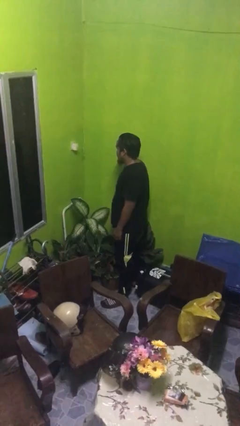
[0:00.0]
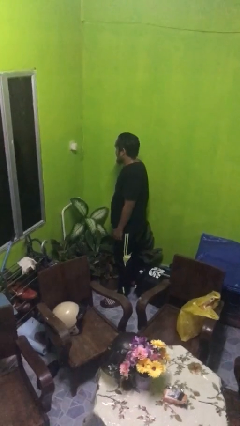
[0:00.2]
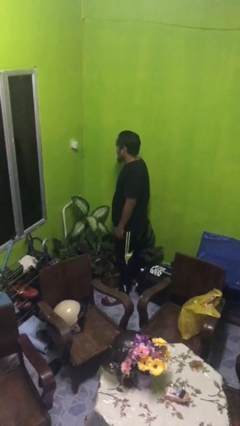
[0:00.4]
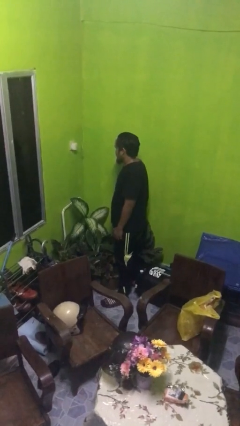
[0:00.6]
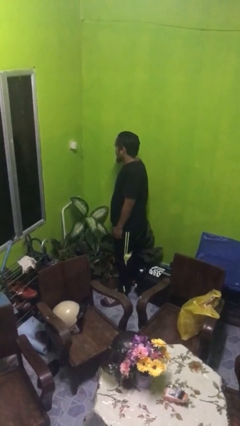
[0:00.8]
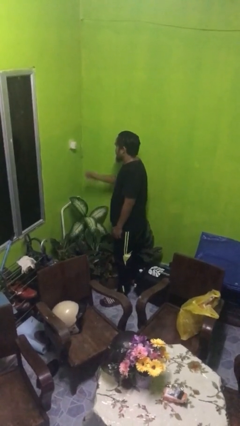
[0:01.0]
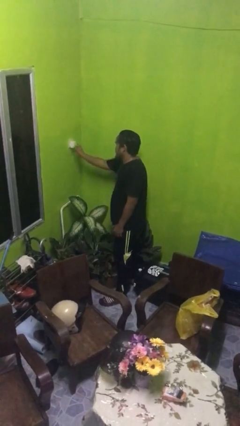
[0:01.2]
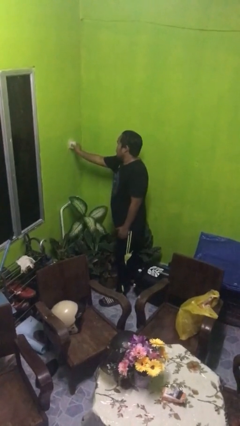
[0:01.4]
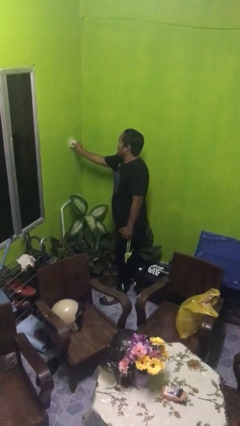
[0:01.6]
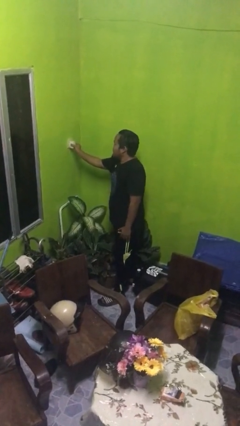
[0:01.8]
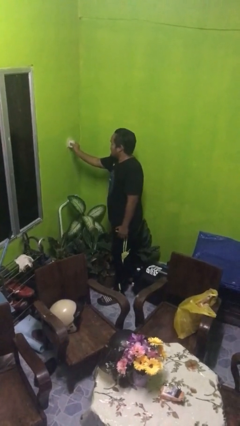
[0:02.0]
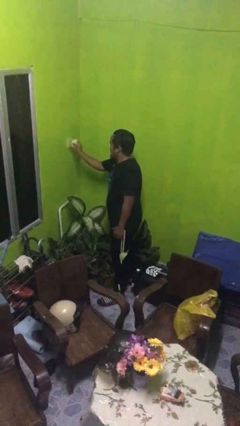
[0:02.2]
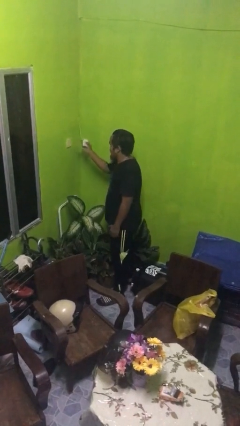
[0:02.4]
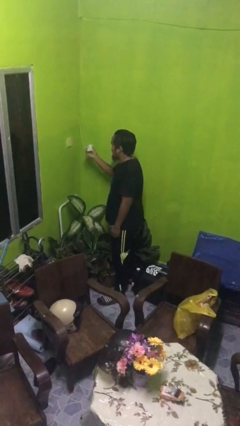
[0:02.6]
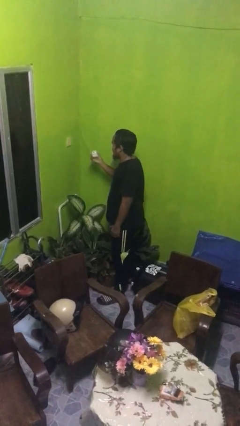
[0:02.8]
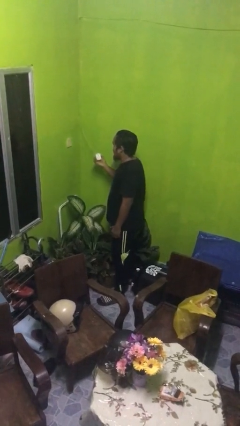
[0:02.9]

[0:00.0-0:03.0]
person unplugs from electrical socket

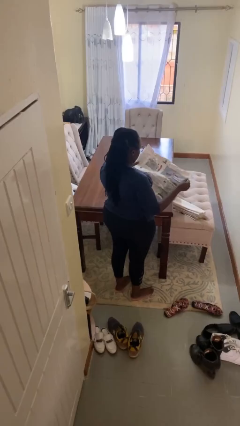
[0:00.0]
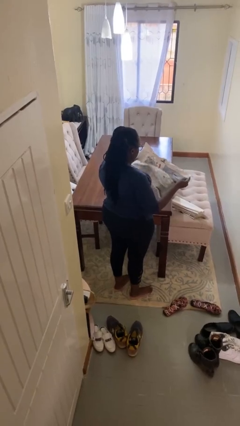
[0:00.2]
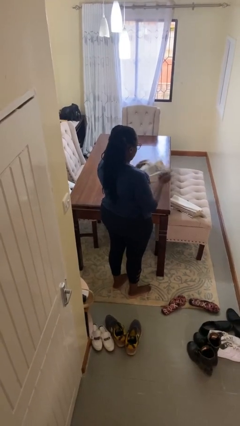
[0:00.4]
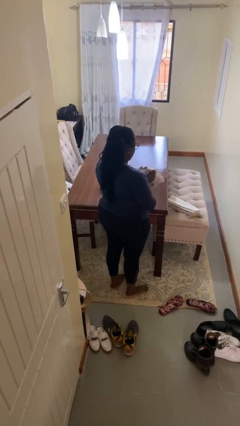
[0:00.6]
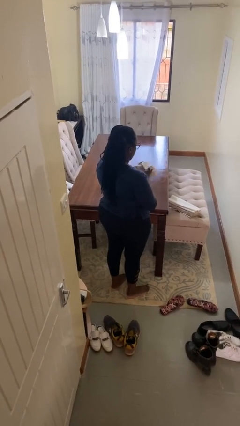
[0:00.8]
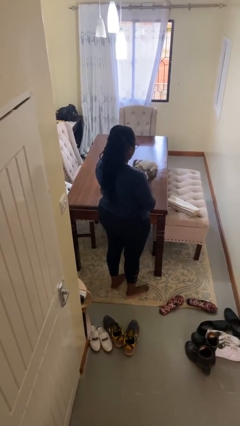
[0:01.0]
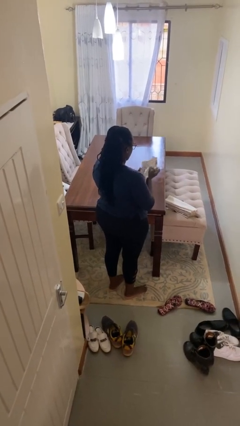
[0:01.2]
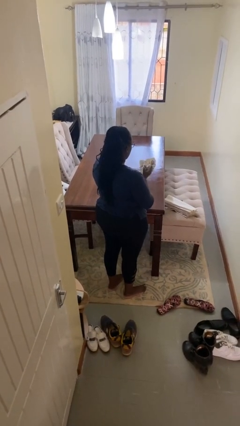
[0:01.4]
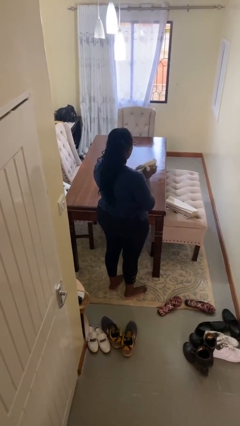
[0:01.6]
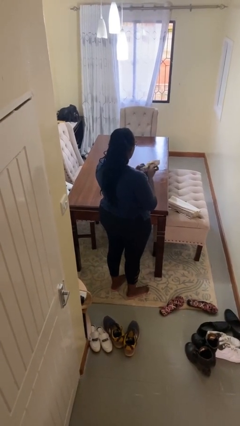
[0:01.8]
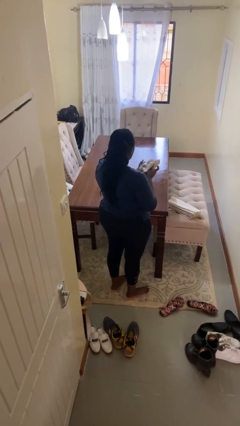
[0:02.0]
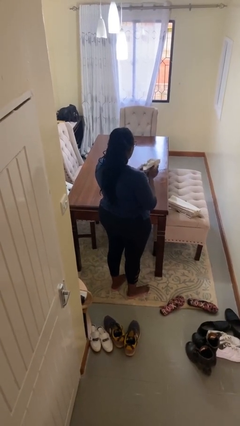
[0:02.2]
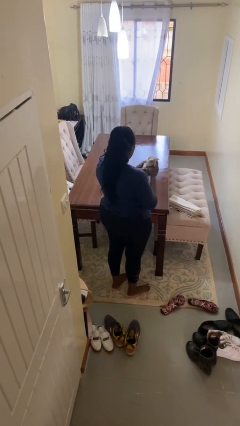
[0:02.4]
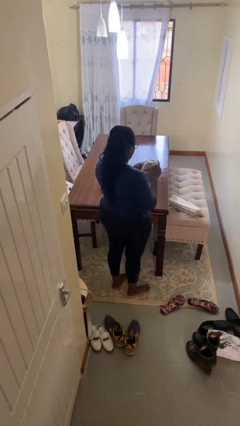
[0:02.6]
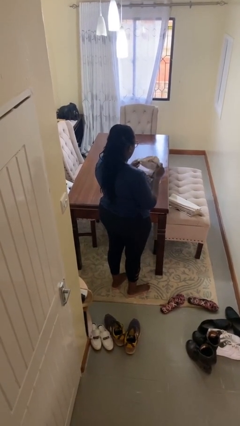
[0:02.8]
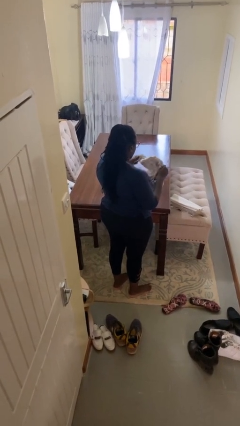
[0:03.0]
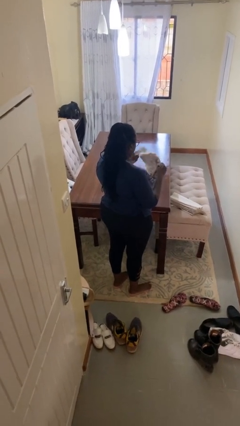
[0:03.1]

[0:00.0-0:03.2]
person crumples paper

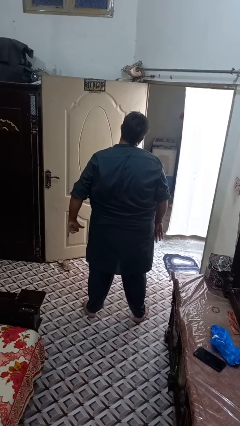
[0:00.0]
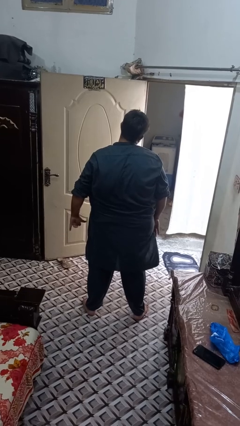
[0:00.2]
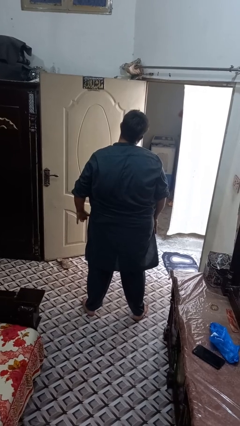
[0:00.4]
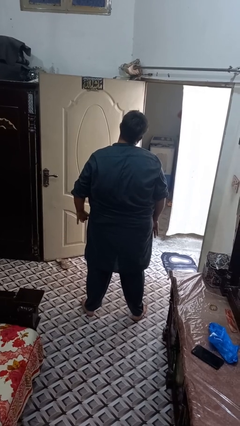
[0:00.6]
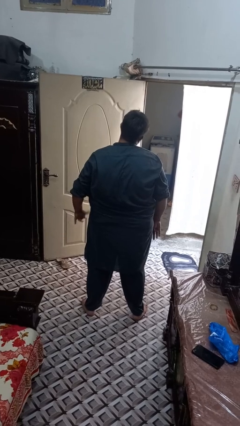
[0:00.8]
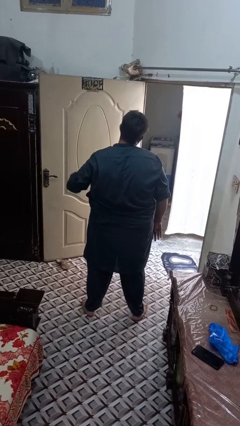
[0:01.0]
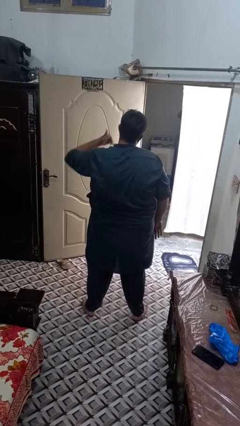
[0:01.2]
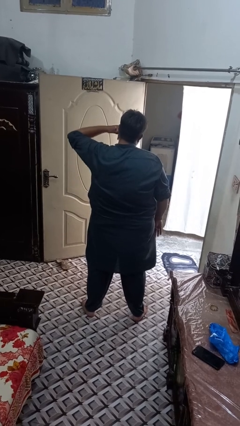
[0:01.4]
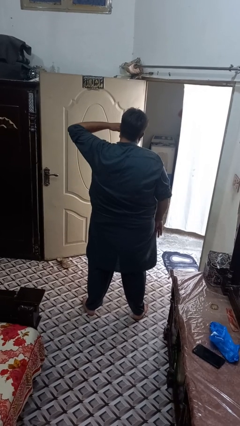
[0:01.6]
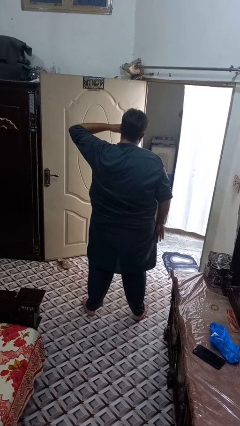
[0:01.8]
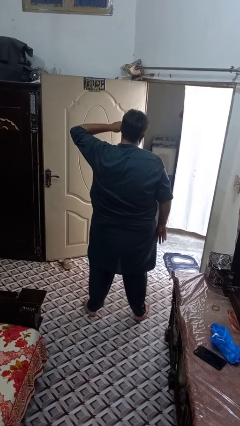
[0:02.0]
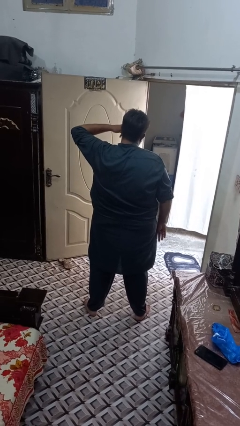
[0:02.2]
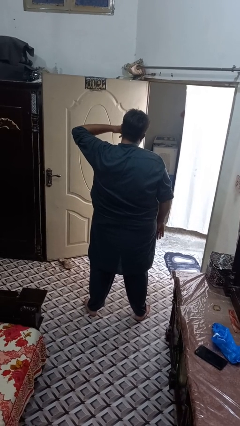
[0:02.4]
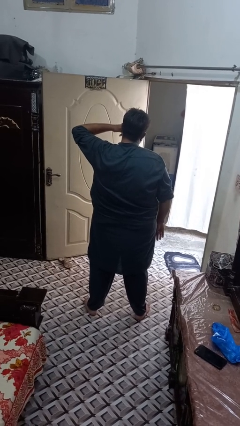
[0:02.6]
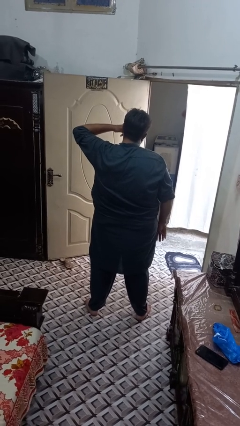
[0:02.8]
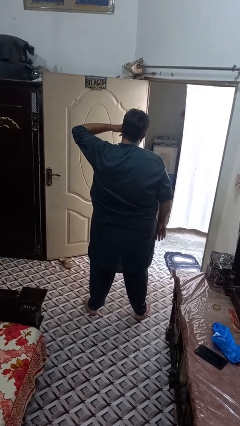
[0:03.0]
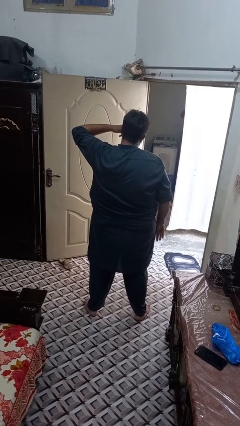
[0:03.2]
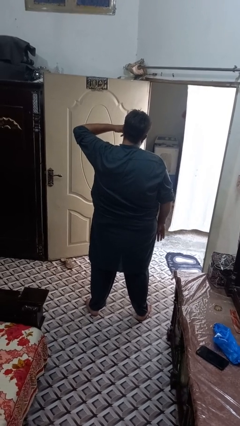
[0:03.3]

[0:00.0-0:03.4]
person gestures call me

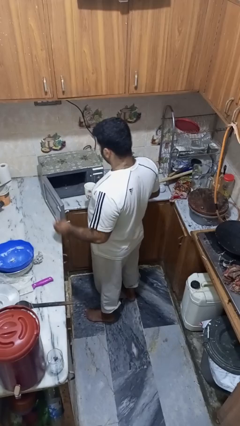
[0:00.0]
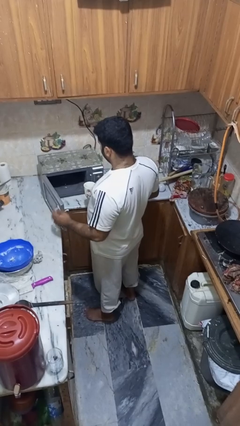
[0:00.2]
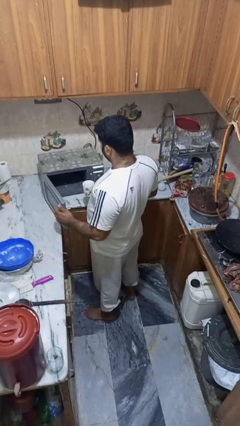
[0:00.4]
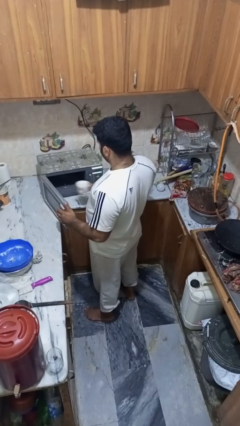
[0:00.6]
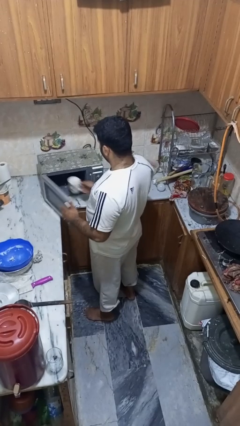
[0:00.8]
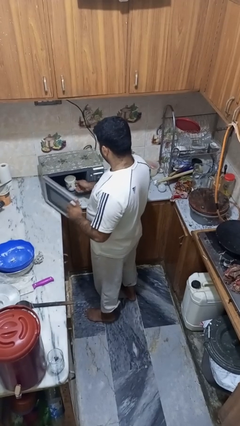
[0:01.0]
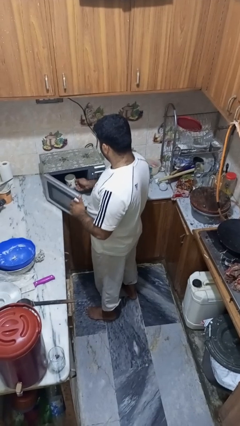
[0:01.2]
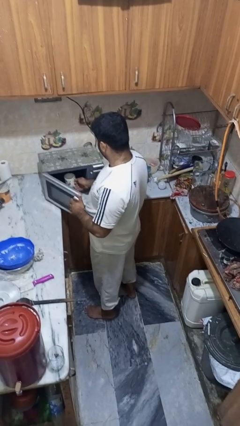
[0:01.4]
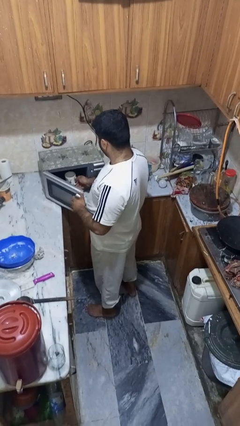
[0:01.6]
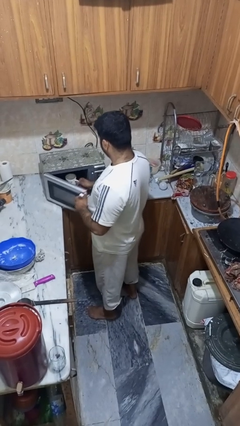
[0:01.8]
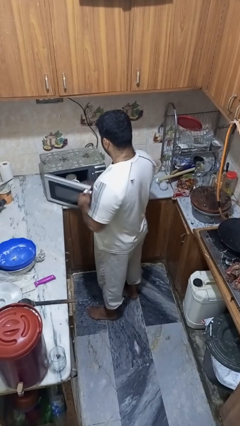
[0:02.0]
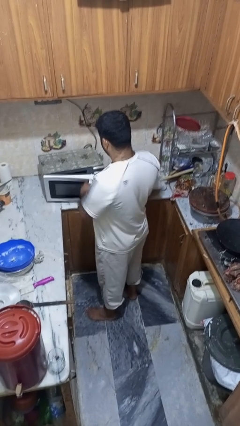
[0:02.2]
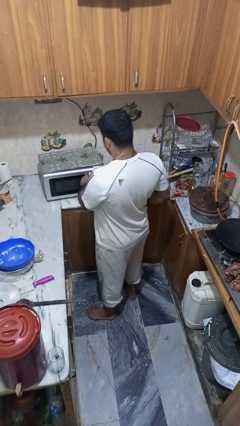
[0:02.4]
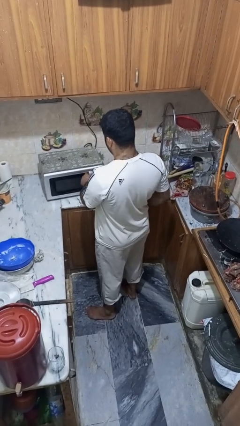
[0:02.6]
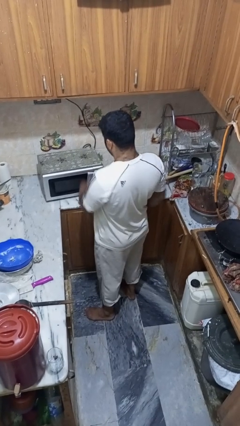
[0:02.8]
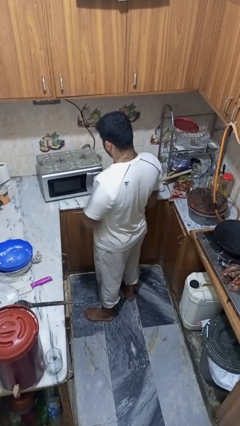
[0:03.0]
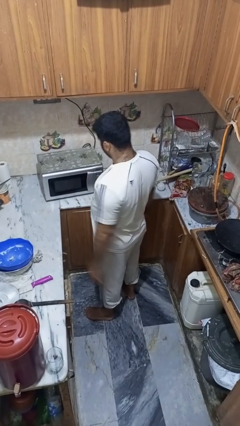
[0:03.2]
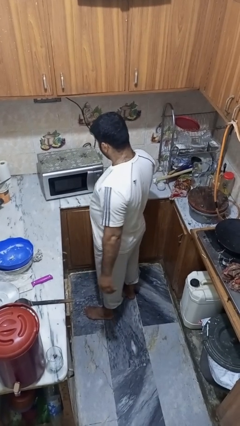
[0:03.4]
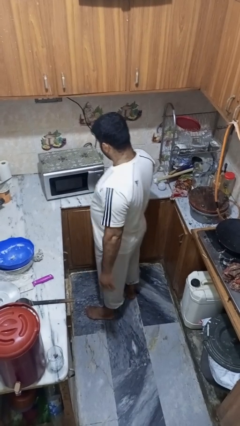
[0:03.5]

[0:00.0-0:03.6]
person puts object into microwave

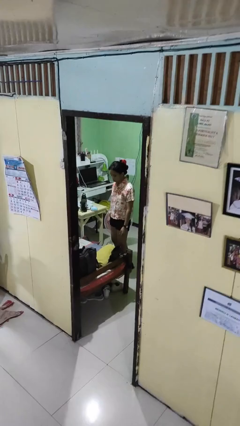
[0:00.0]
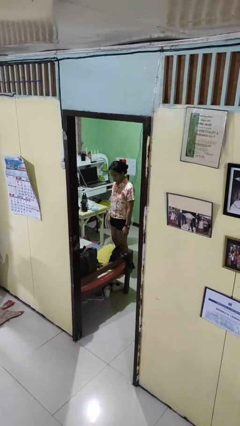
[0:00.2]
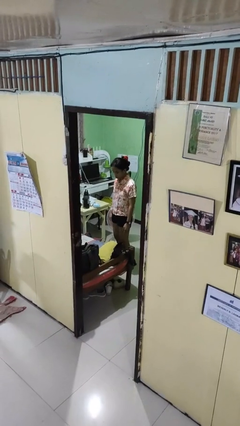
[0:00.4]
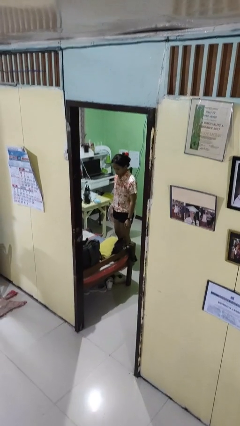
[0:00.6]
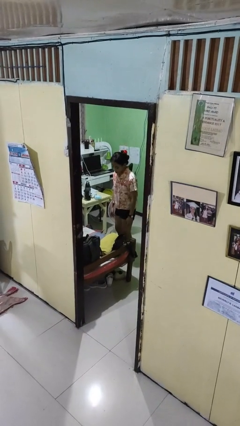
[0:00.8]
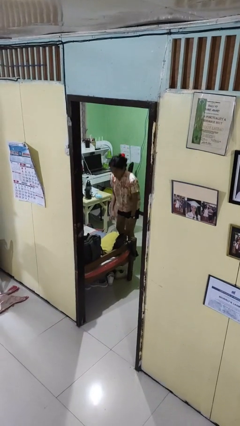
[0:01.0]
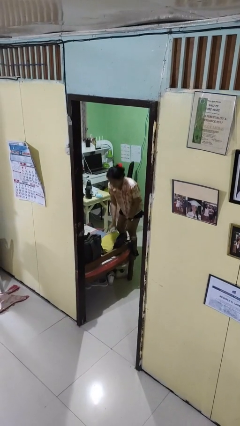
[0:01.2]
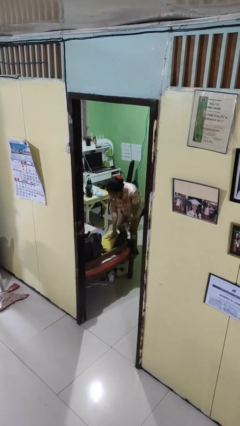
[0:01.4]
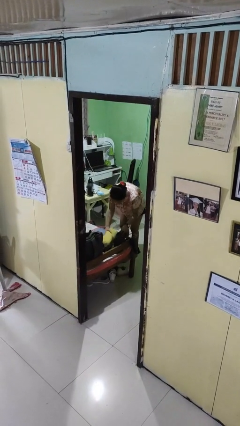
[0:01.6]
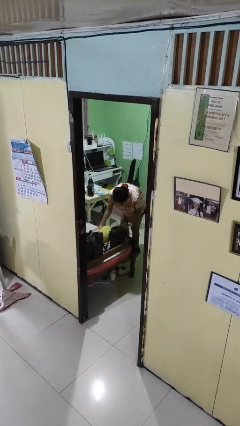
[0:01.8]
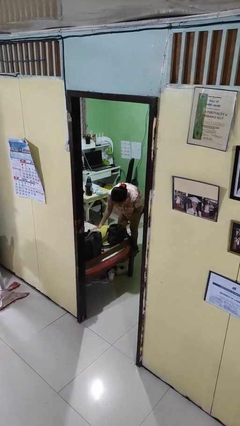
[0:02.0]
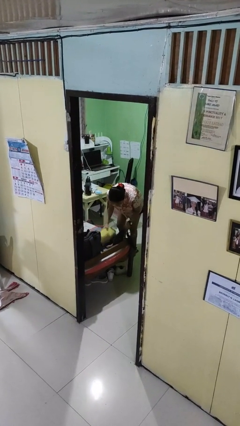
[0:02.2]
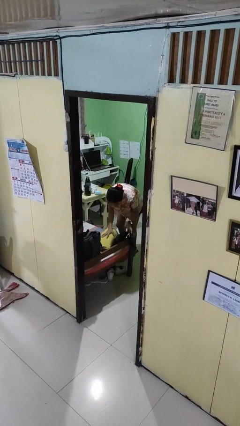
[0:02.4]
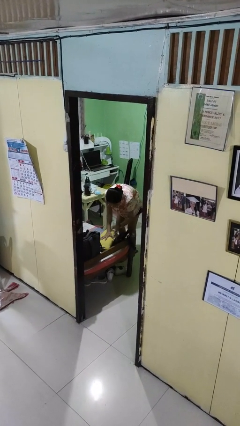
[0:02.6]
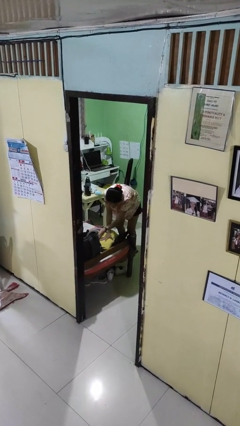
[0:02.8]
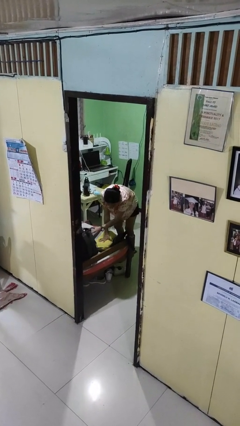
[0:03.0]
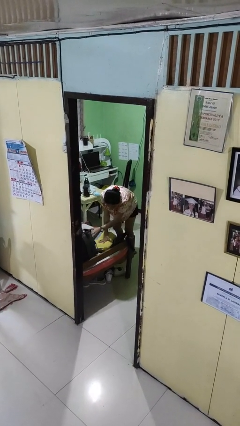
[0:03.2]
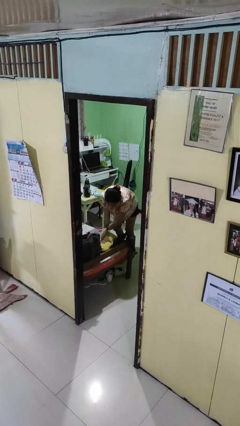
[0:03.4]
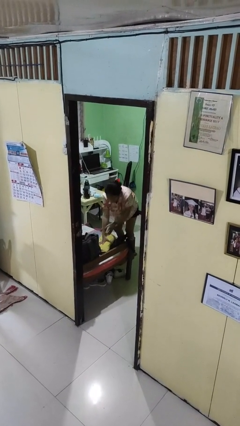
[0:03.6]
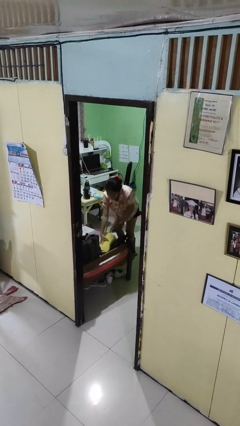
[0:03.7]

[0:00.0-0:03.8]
person searches under bed

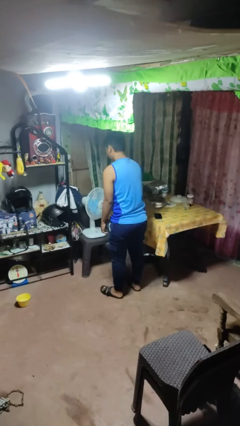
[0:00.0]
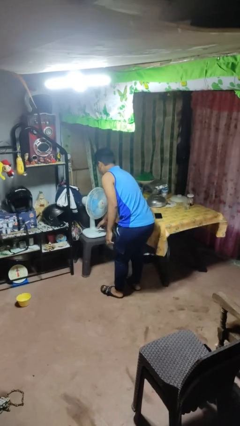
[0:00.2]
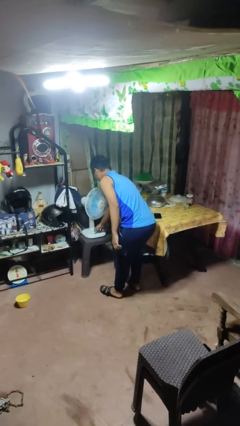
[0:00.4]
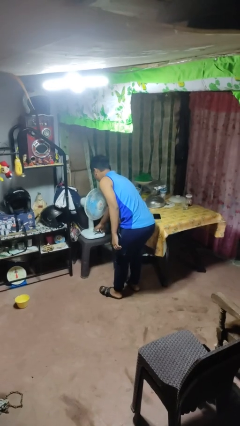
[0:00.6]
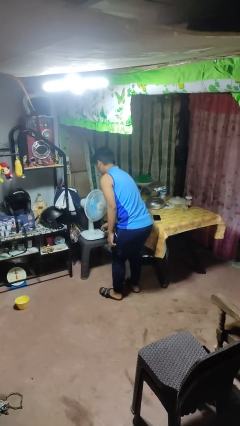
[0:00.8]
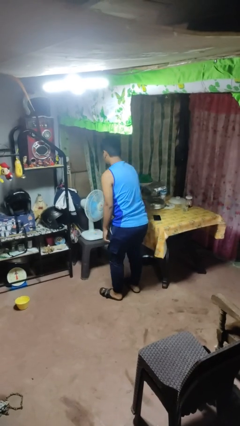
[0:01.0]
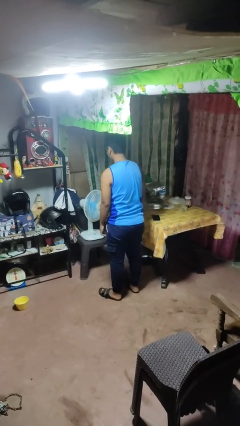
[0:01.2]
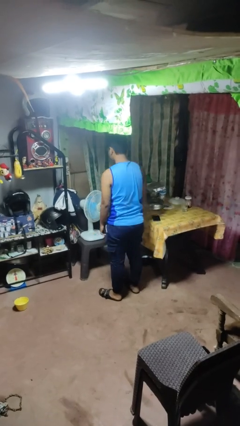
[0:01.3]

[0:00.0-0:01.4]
person turns on fan
